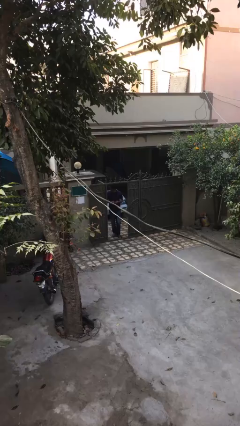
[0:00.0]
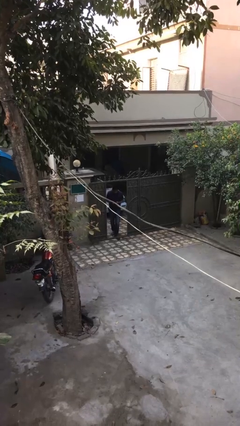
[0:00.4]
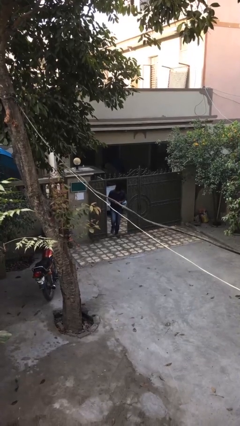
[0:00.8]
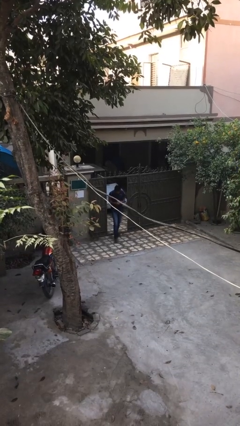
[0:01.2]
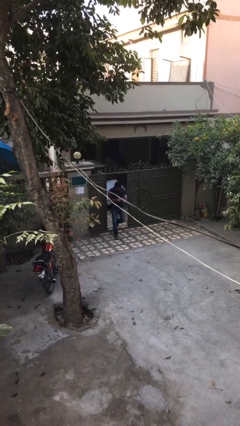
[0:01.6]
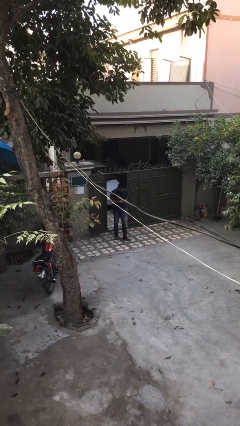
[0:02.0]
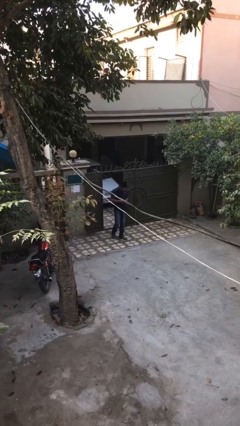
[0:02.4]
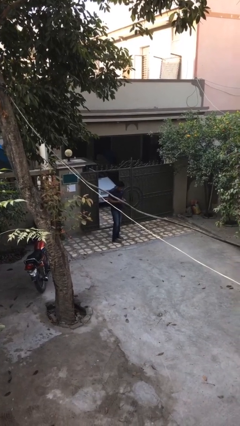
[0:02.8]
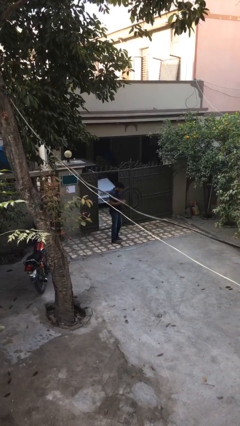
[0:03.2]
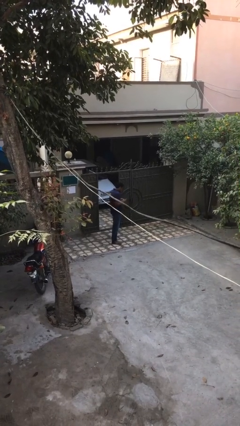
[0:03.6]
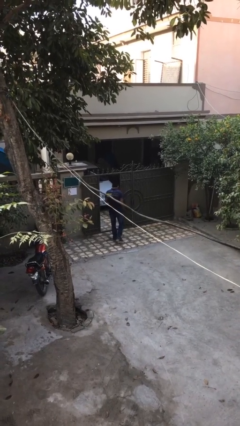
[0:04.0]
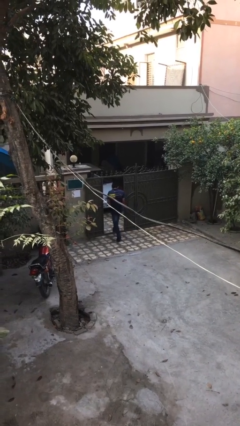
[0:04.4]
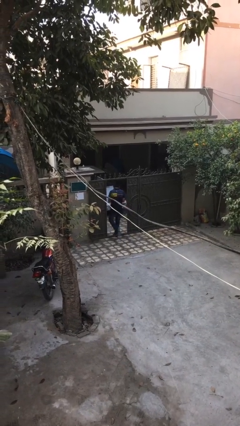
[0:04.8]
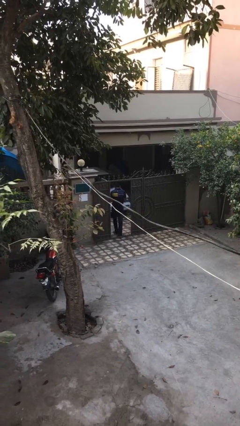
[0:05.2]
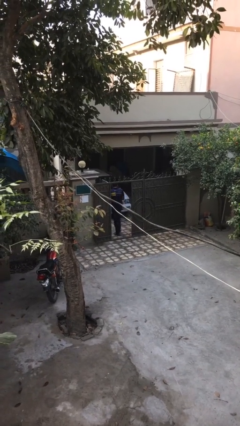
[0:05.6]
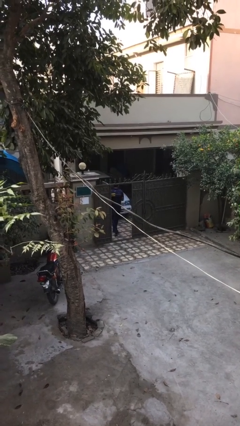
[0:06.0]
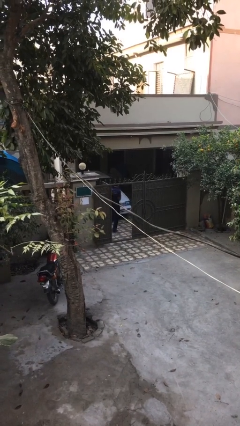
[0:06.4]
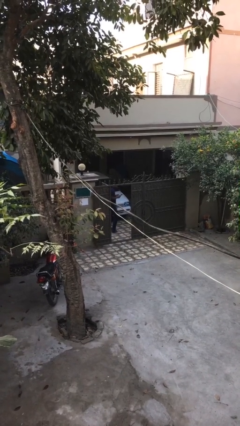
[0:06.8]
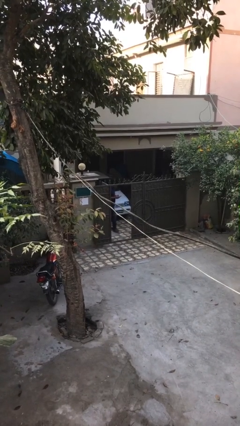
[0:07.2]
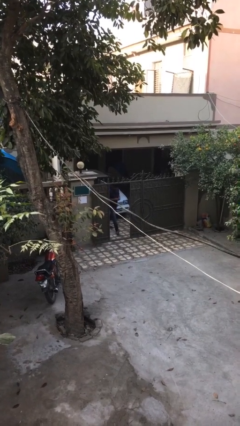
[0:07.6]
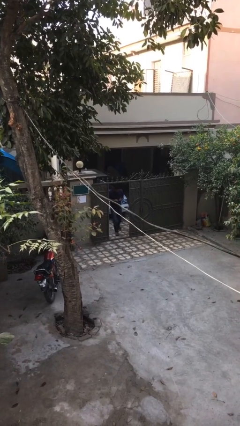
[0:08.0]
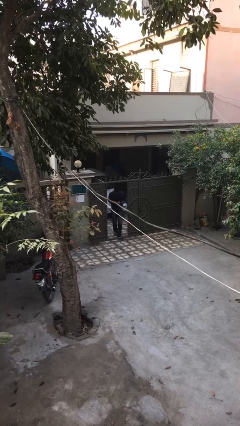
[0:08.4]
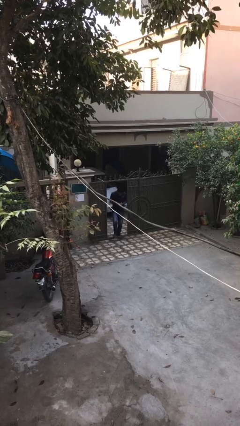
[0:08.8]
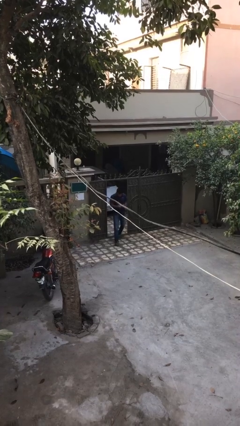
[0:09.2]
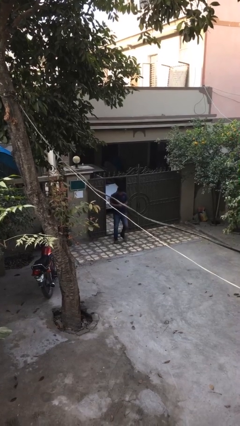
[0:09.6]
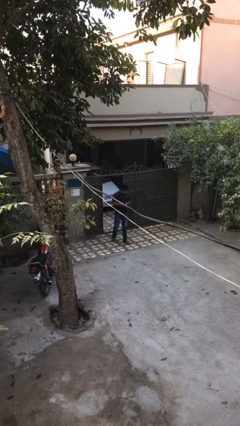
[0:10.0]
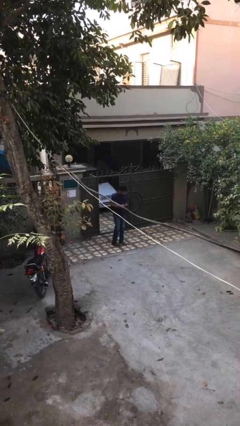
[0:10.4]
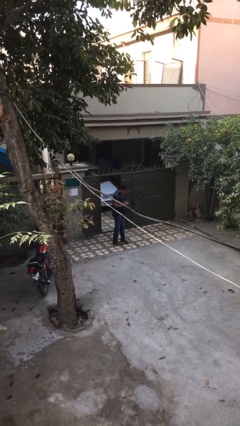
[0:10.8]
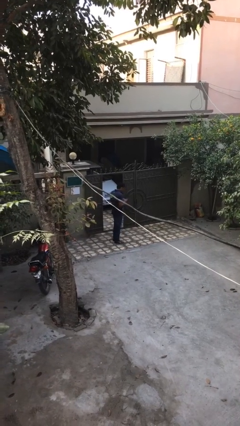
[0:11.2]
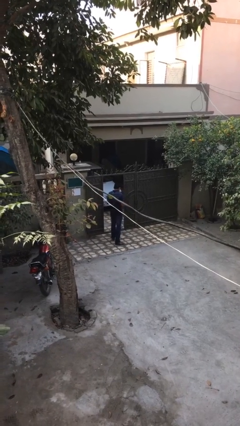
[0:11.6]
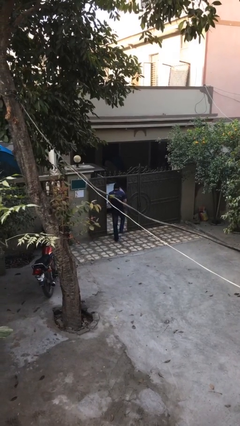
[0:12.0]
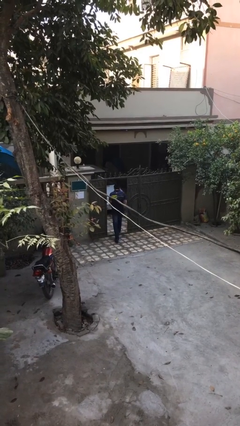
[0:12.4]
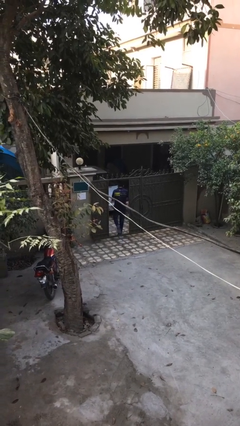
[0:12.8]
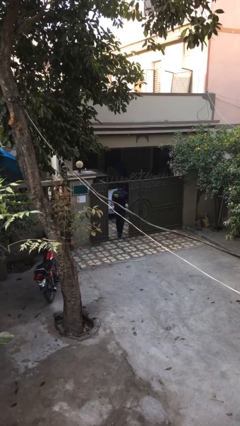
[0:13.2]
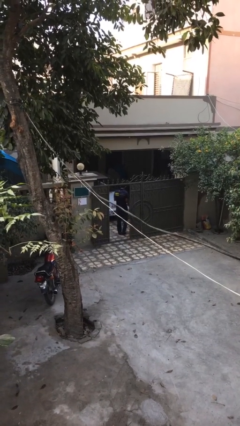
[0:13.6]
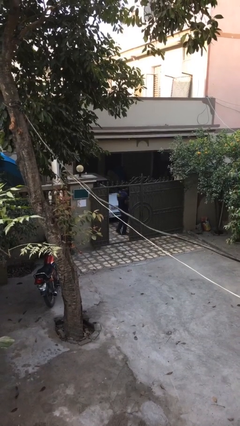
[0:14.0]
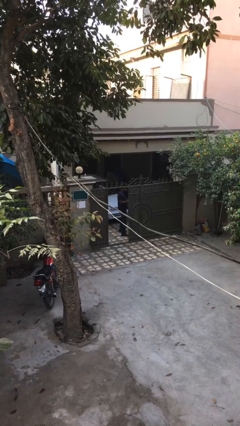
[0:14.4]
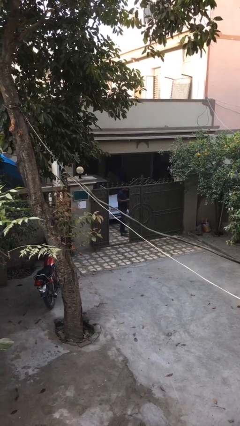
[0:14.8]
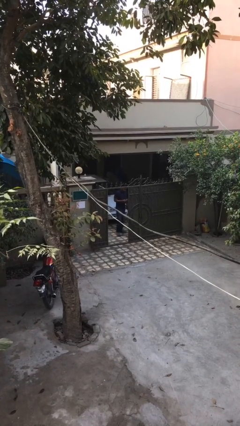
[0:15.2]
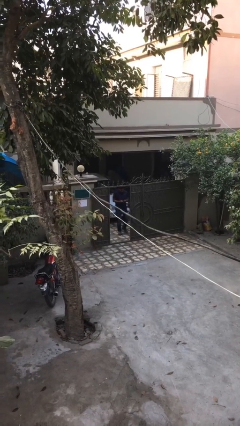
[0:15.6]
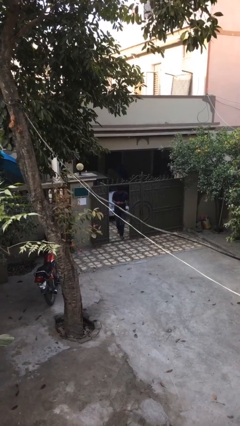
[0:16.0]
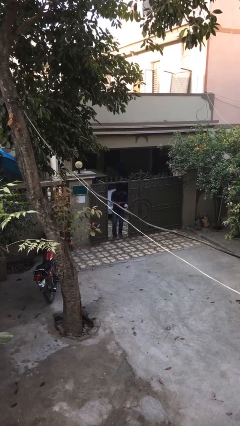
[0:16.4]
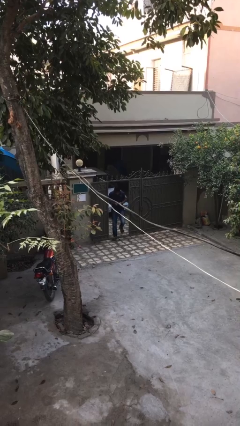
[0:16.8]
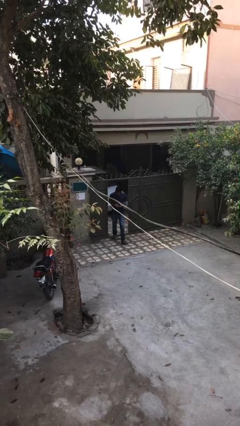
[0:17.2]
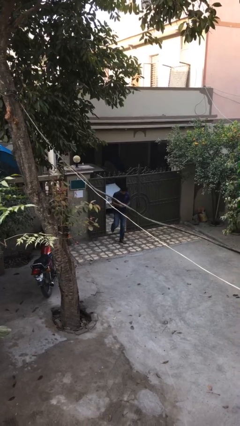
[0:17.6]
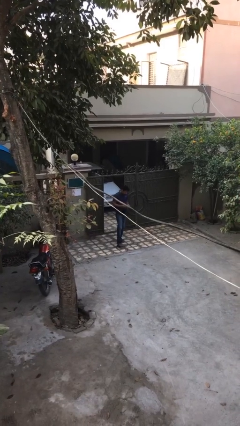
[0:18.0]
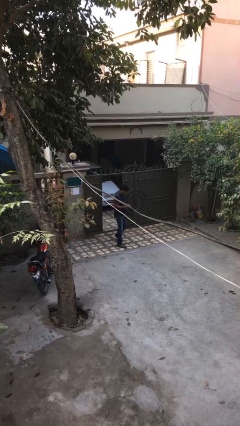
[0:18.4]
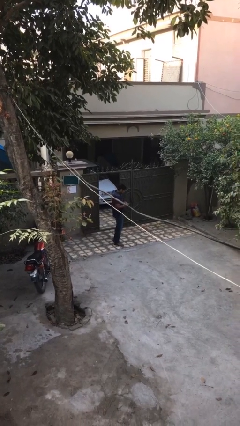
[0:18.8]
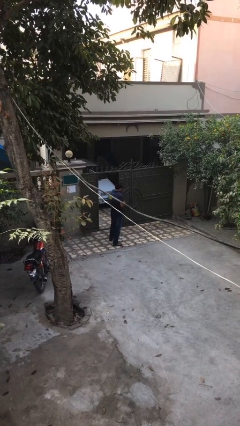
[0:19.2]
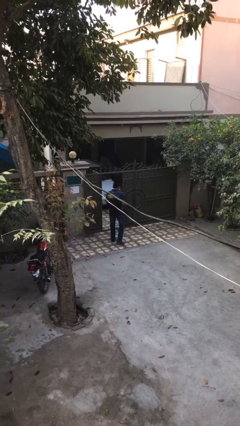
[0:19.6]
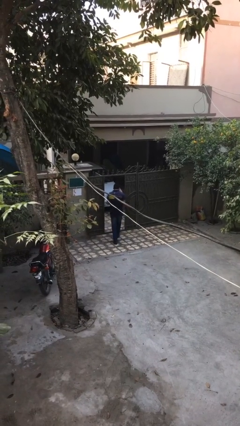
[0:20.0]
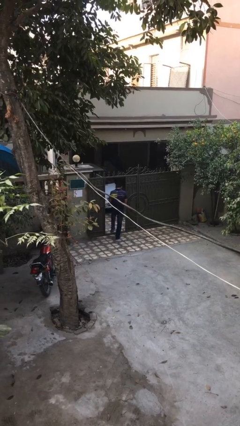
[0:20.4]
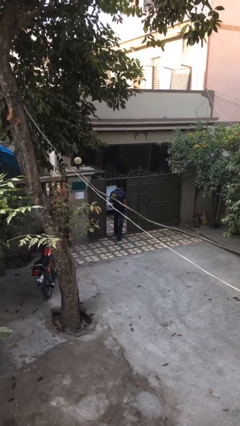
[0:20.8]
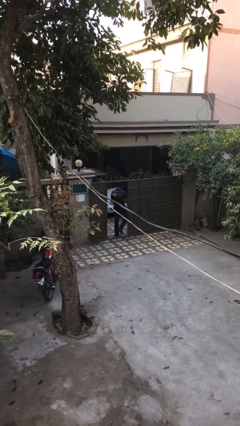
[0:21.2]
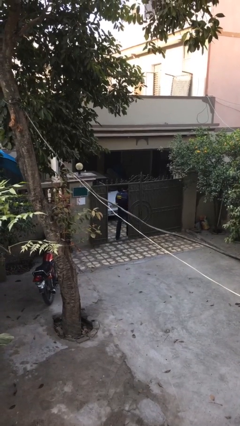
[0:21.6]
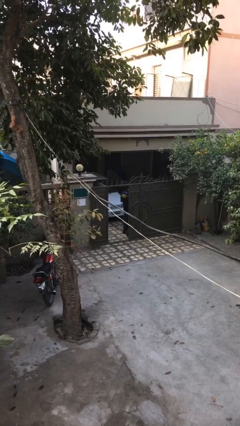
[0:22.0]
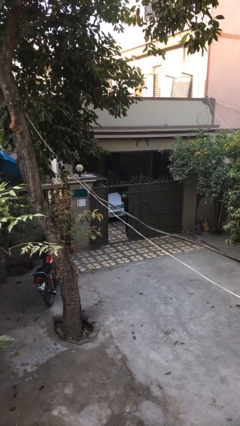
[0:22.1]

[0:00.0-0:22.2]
person texts on phone

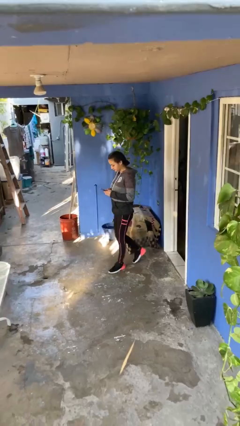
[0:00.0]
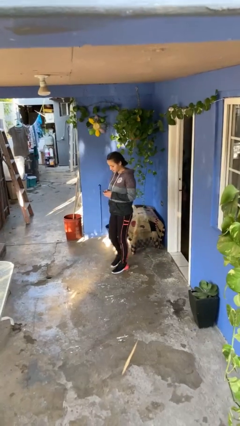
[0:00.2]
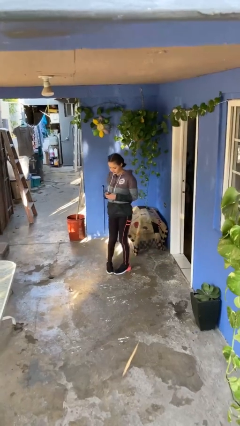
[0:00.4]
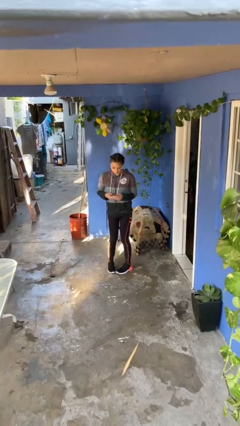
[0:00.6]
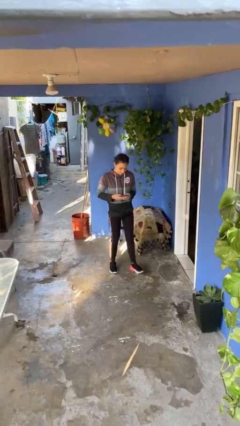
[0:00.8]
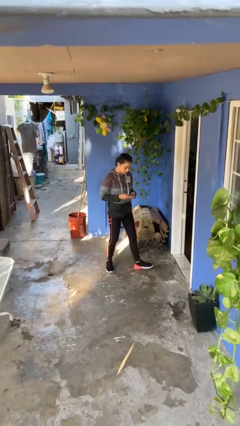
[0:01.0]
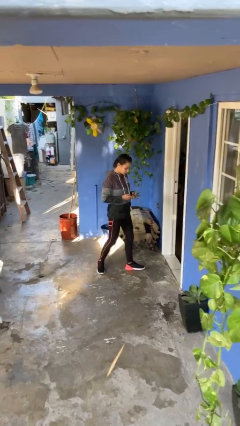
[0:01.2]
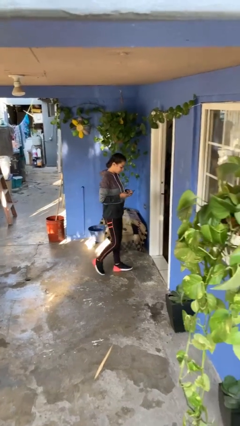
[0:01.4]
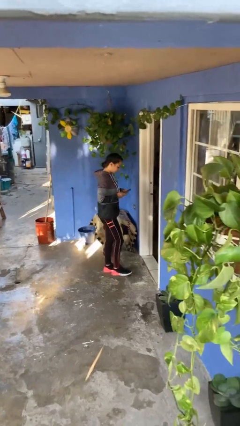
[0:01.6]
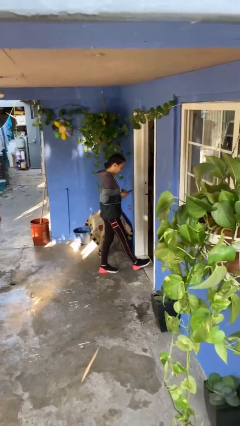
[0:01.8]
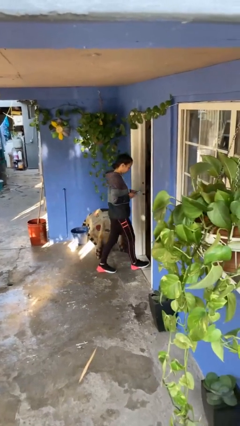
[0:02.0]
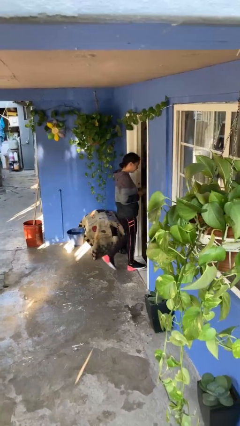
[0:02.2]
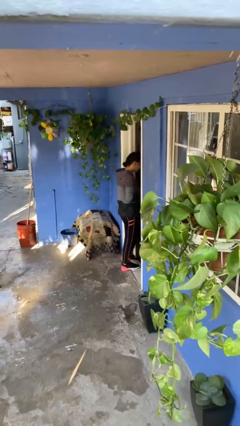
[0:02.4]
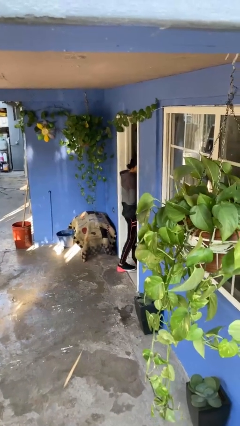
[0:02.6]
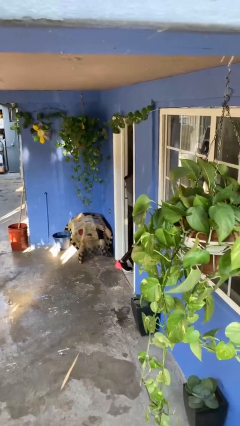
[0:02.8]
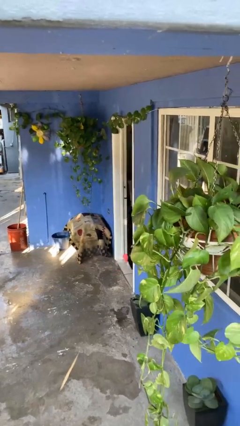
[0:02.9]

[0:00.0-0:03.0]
person exits scene through structure

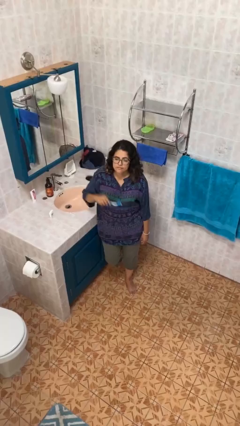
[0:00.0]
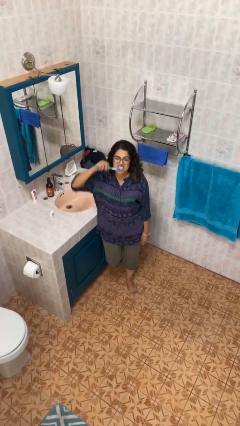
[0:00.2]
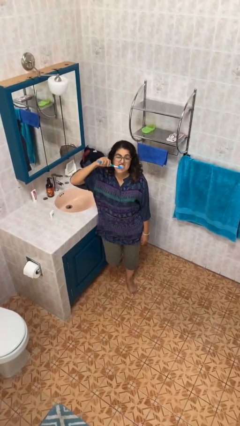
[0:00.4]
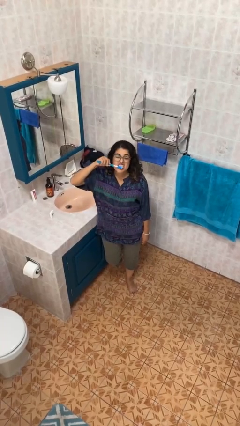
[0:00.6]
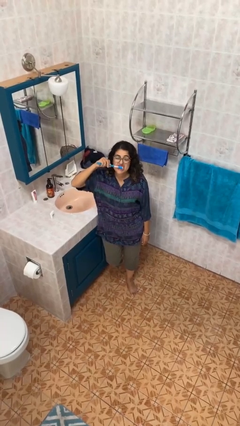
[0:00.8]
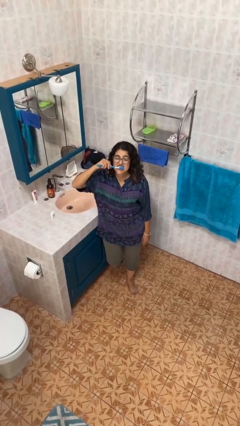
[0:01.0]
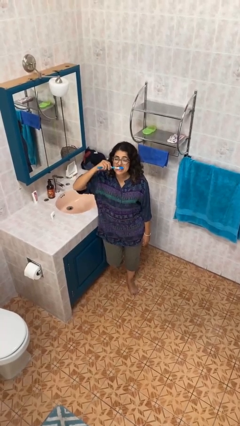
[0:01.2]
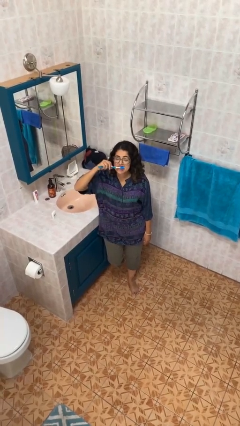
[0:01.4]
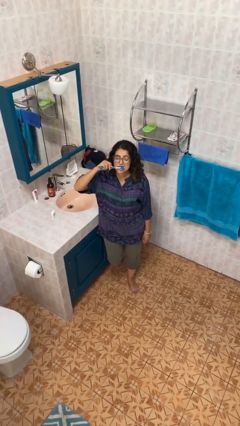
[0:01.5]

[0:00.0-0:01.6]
person brushes teeth

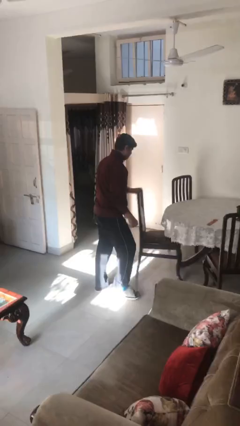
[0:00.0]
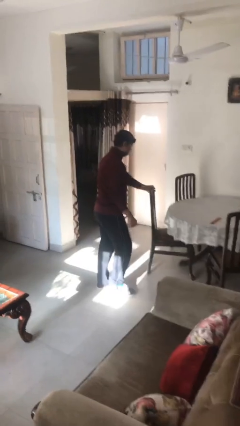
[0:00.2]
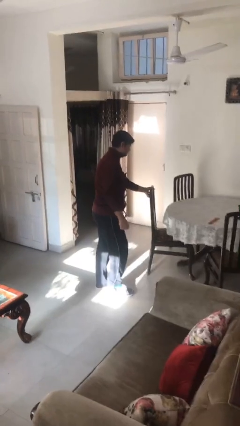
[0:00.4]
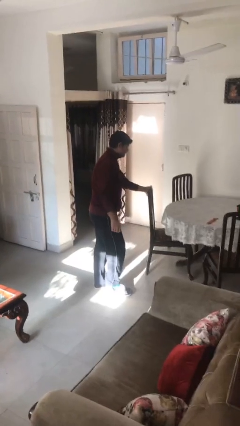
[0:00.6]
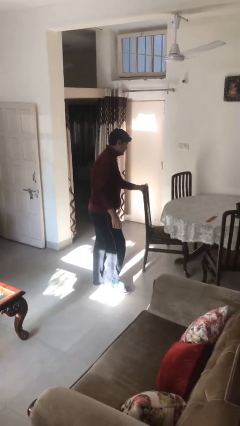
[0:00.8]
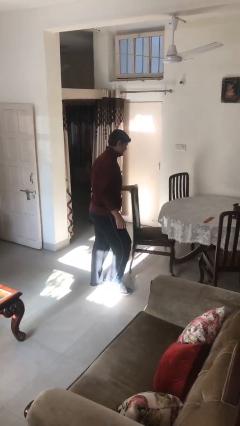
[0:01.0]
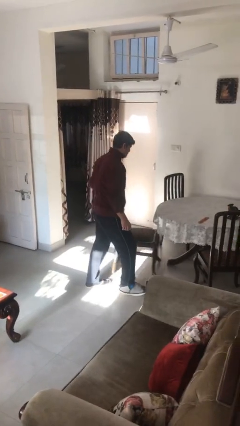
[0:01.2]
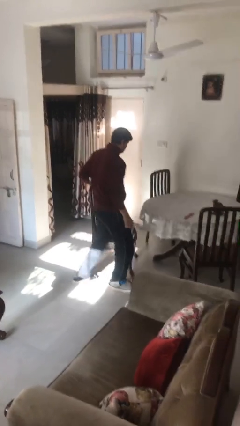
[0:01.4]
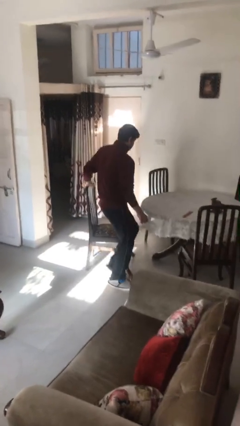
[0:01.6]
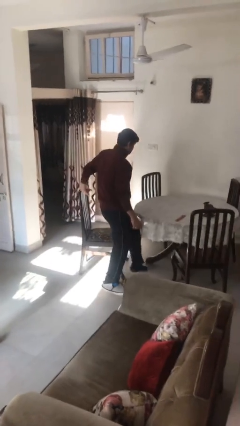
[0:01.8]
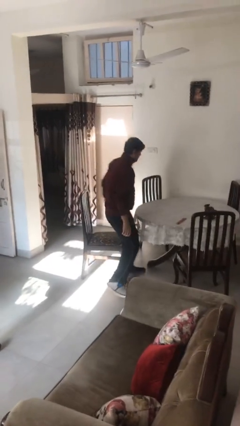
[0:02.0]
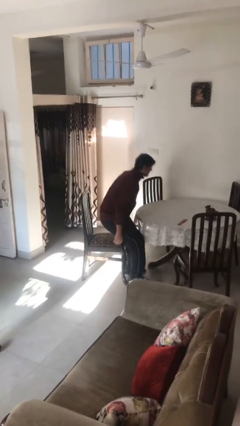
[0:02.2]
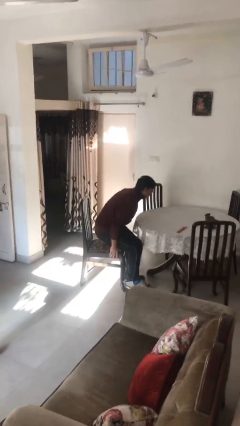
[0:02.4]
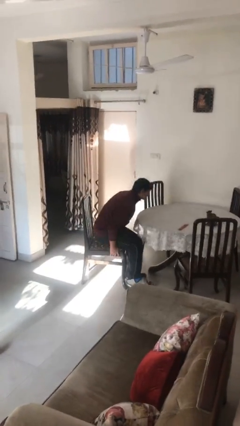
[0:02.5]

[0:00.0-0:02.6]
person sits down
